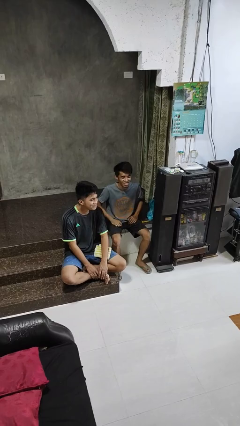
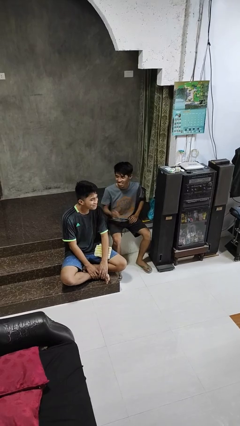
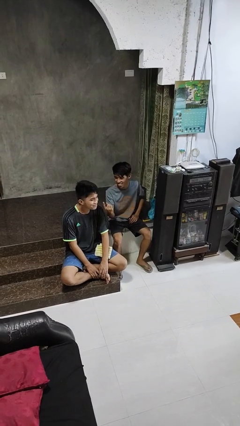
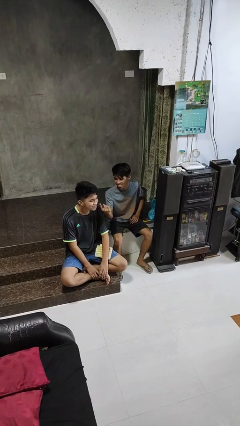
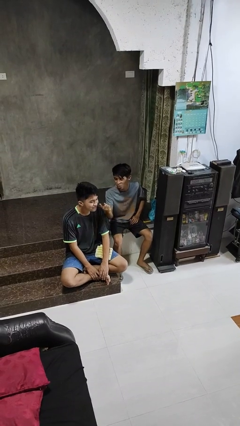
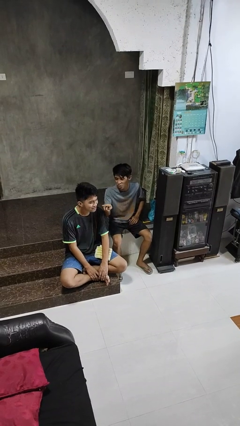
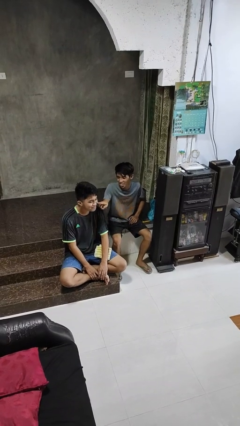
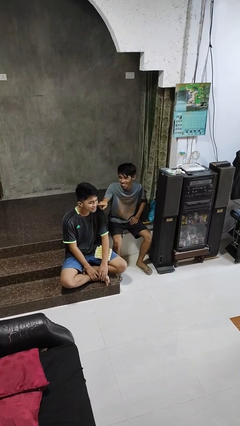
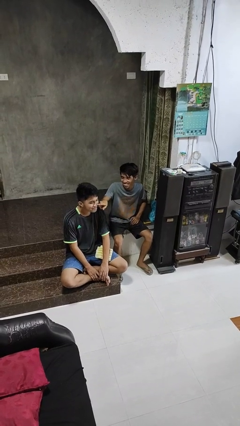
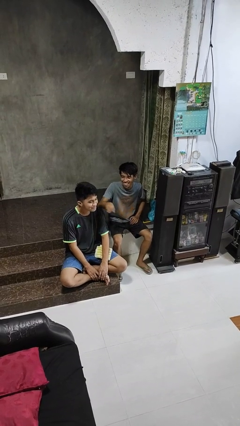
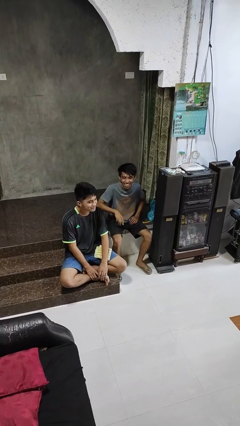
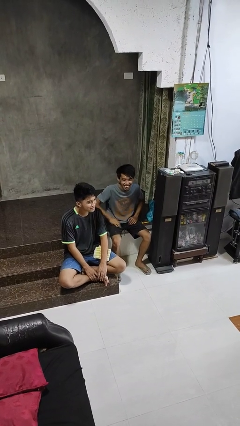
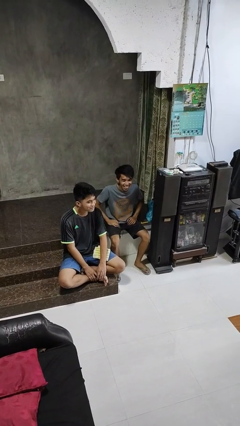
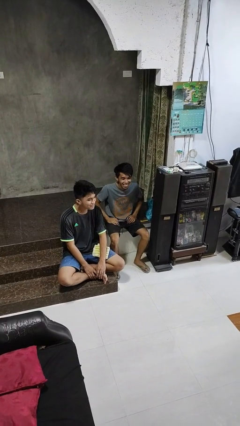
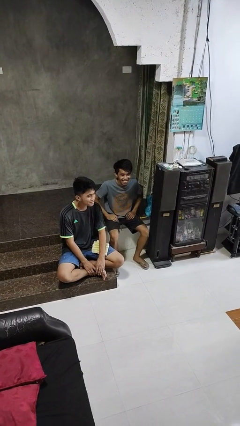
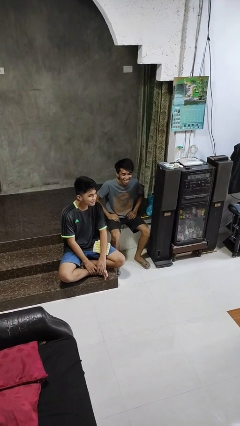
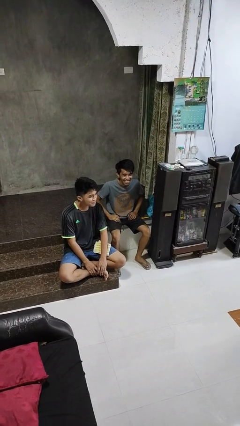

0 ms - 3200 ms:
person touches face of person

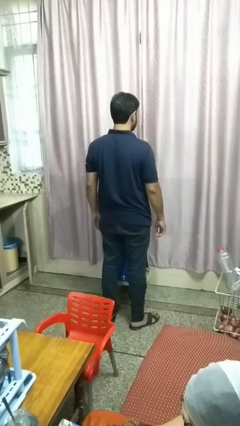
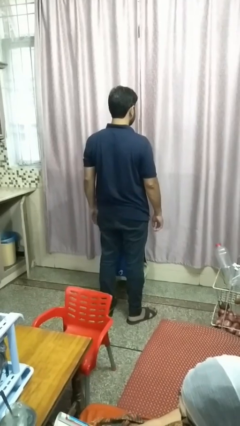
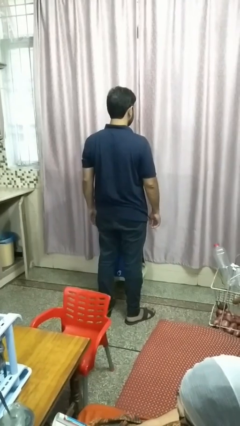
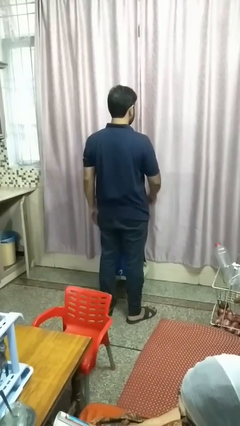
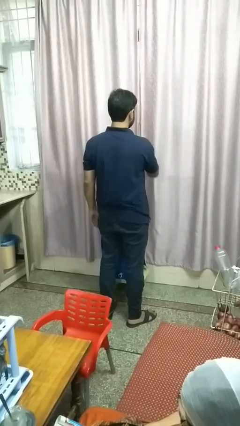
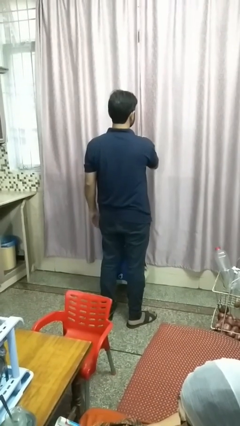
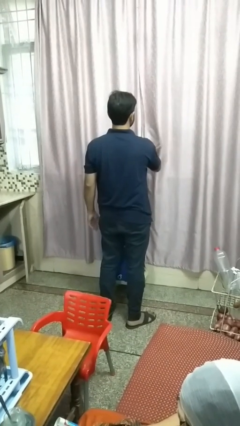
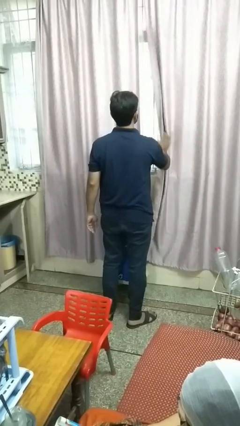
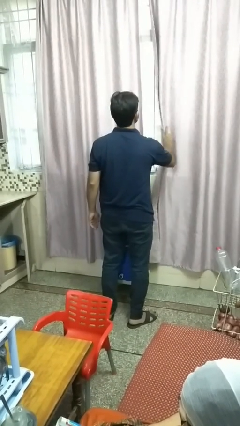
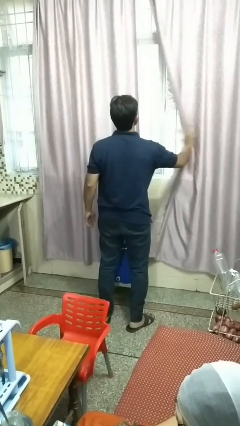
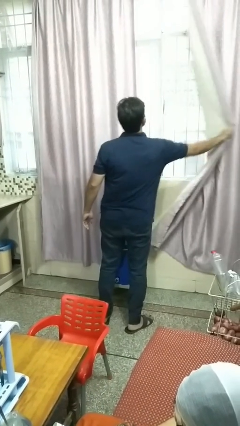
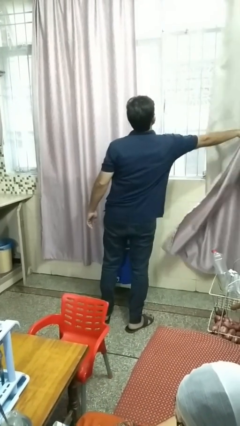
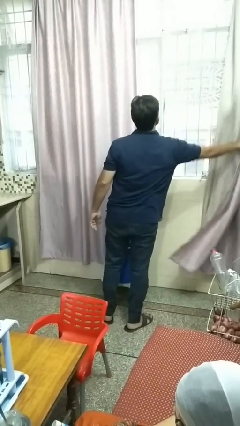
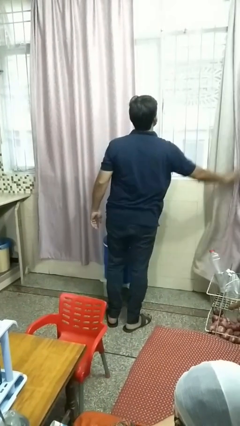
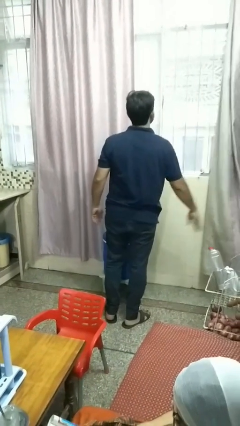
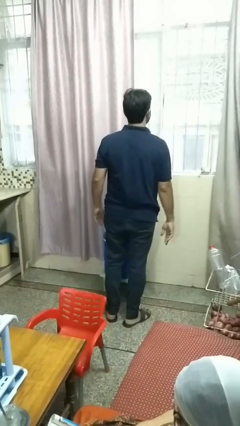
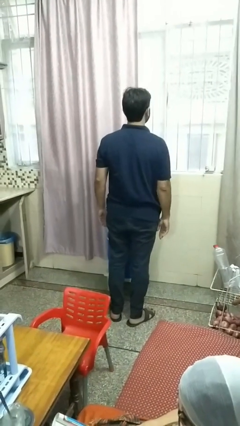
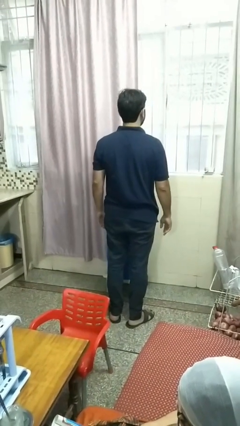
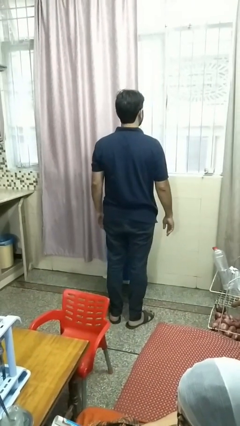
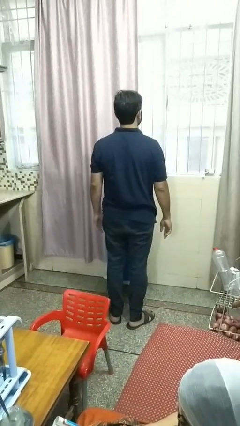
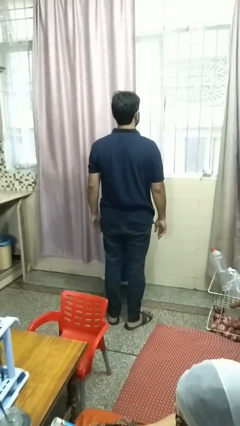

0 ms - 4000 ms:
person opens curtains

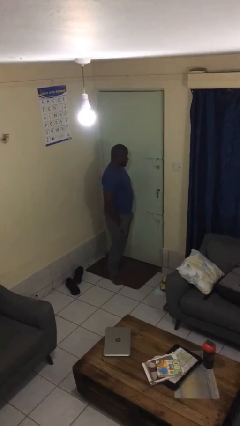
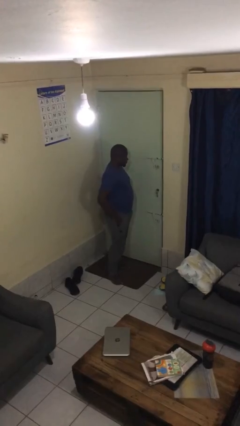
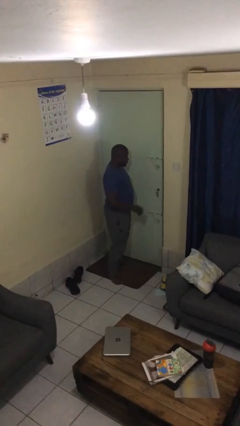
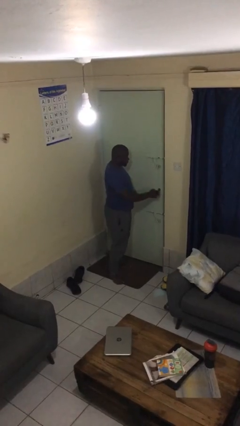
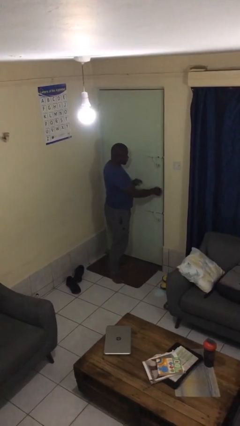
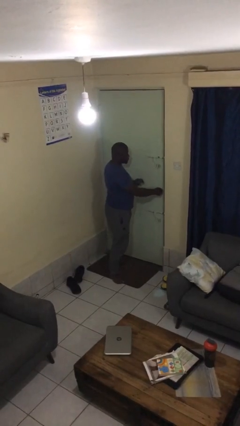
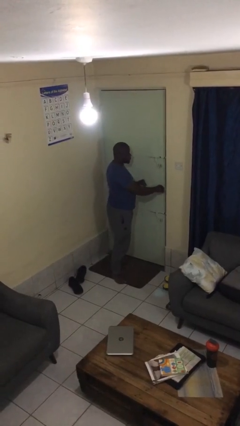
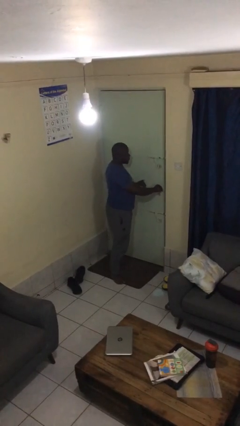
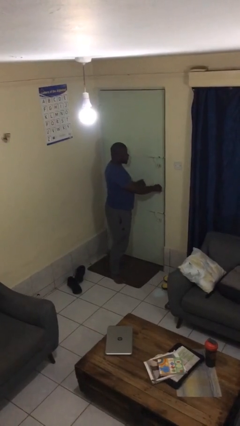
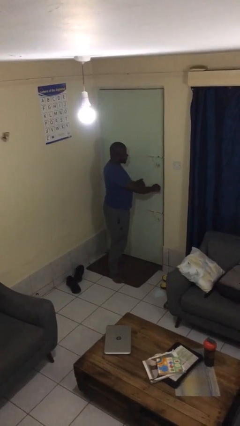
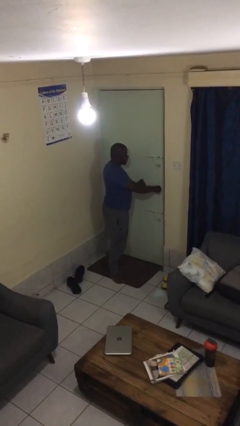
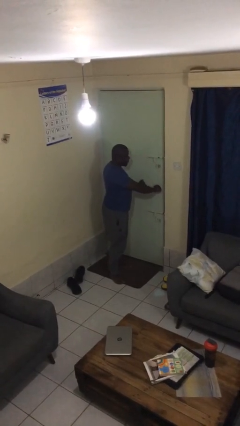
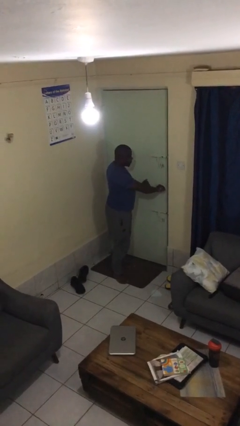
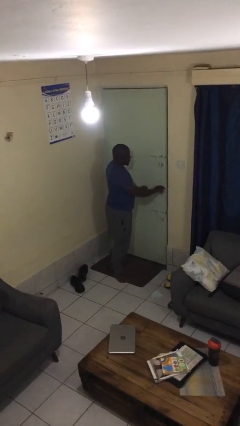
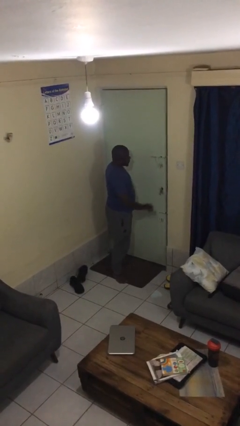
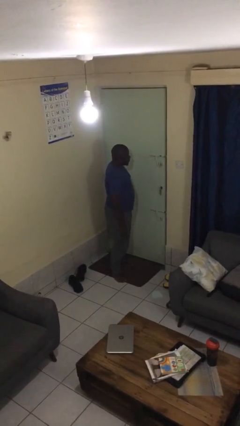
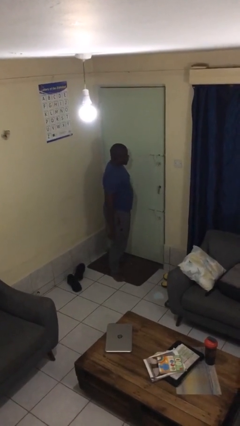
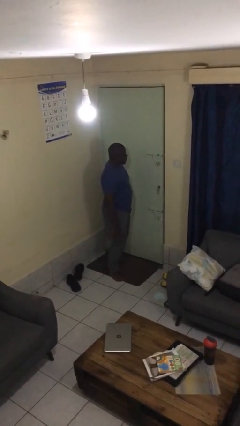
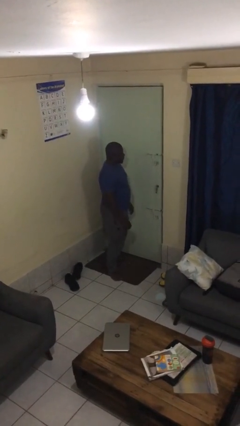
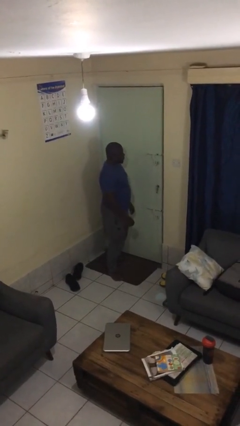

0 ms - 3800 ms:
person unlocks door with keys

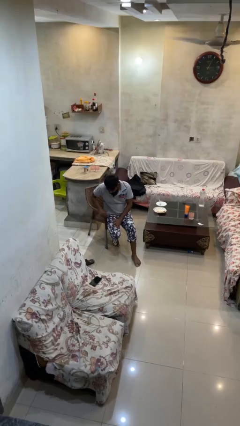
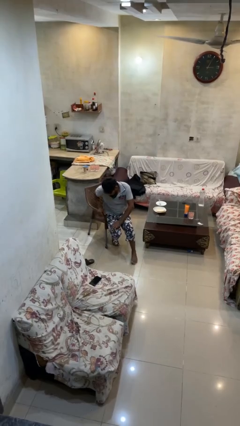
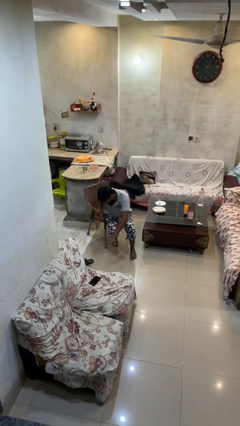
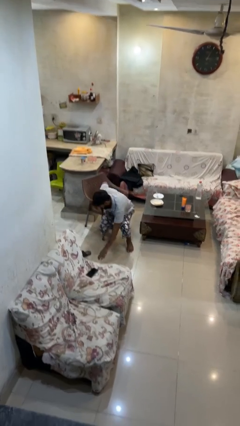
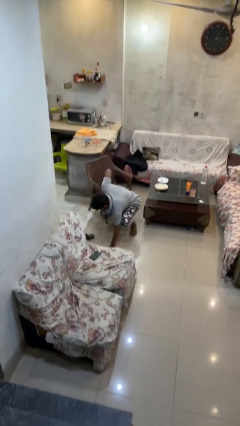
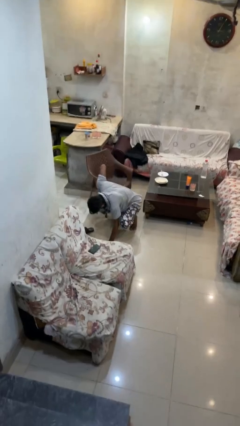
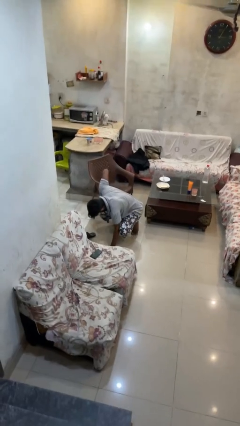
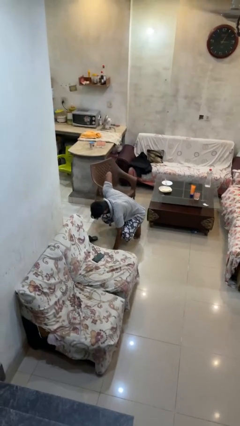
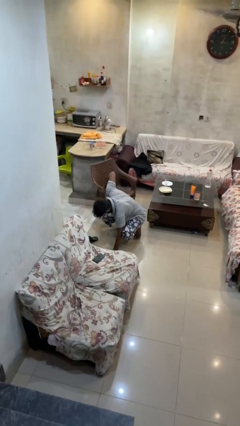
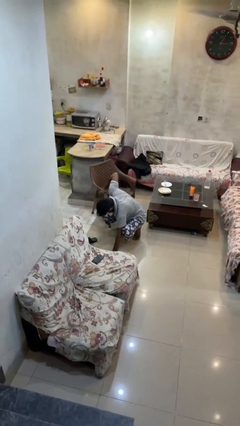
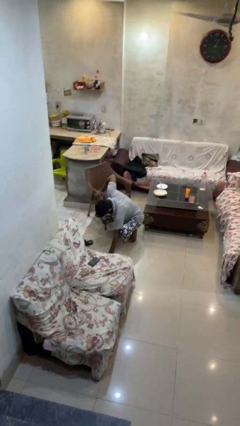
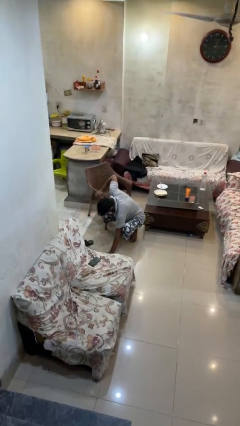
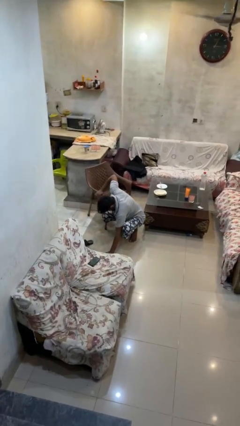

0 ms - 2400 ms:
person falls from chair

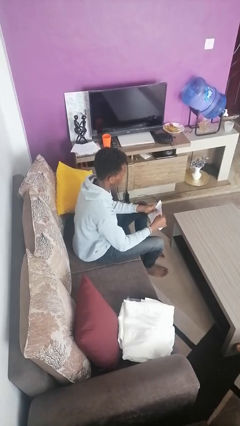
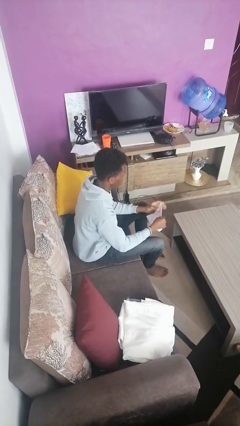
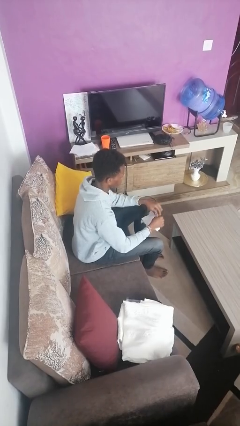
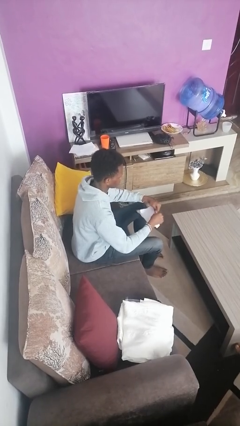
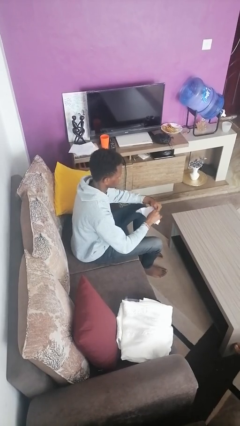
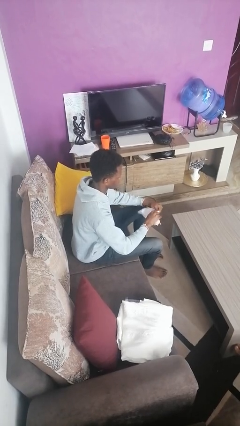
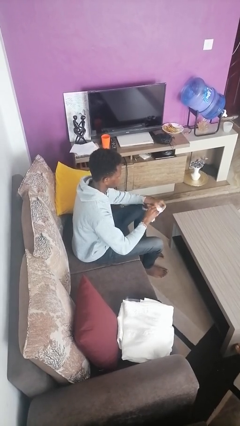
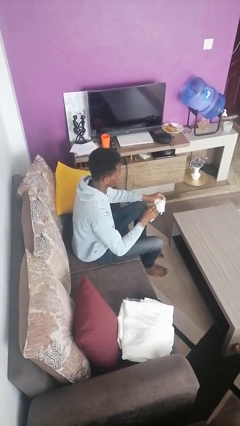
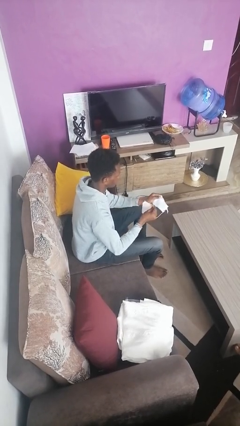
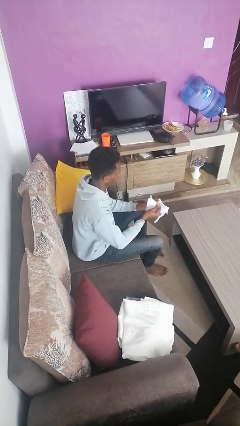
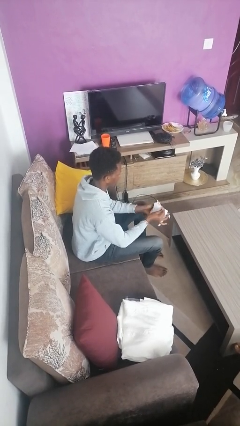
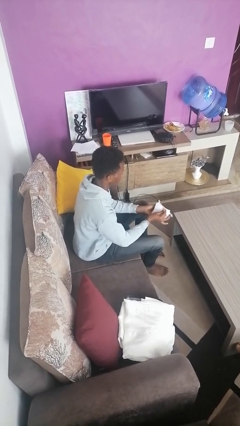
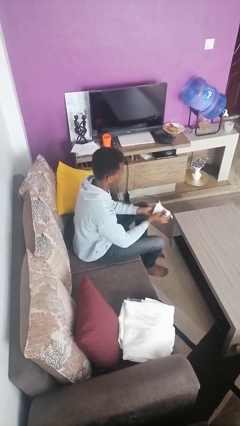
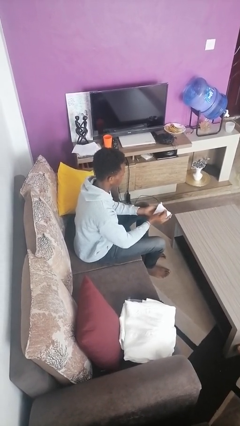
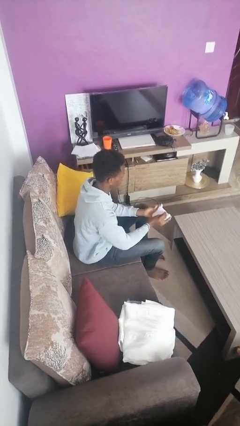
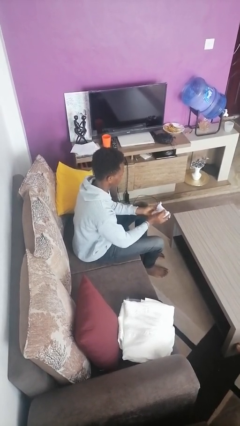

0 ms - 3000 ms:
person tears paper

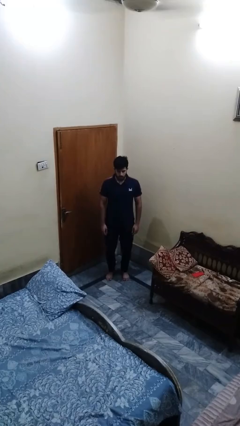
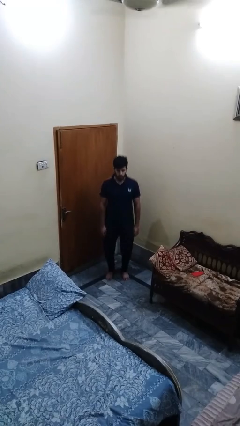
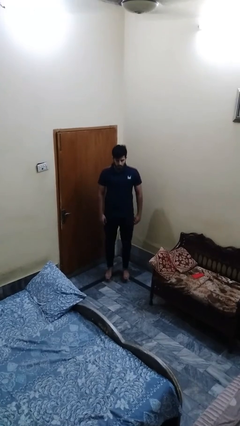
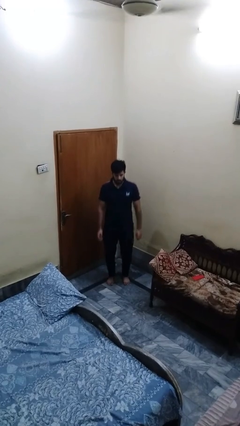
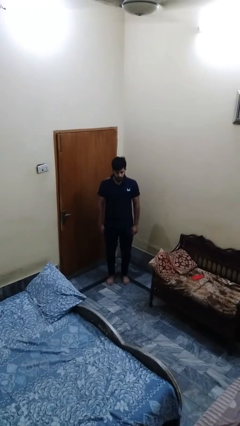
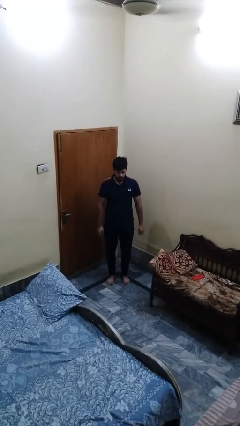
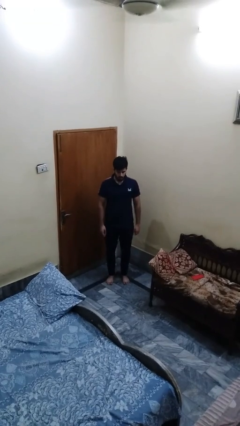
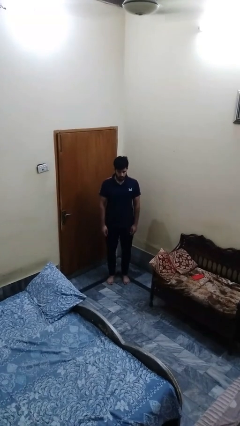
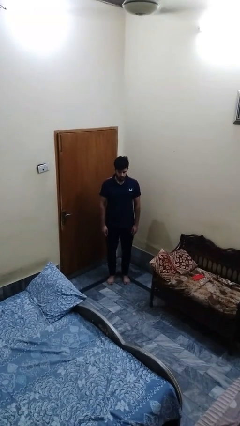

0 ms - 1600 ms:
person jumps
